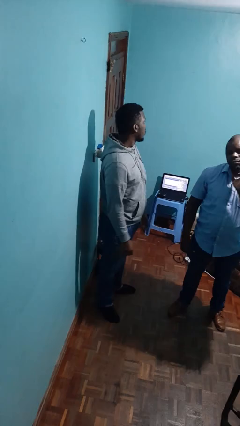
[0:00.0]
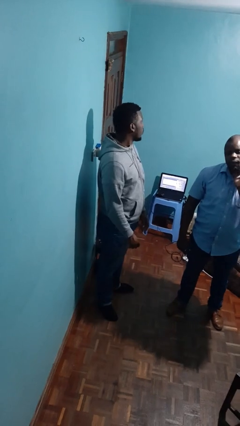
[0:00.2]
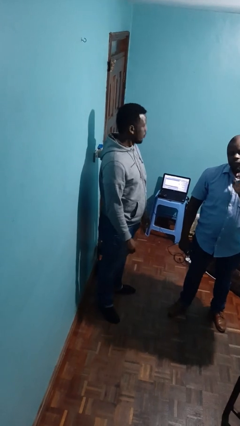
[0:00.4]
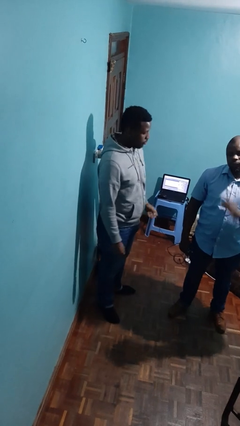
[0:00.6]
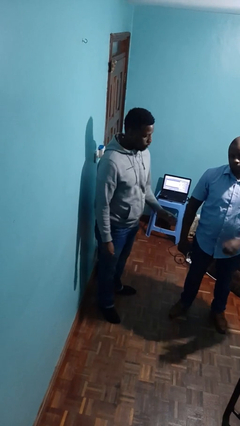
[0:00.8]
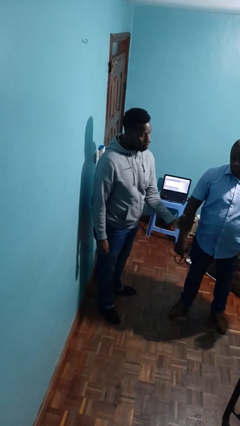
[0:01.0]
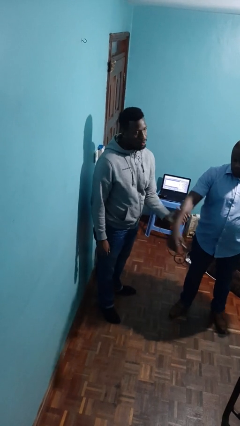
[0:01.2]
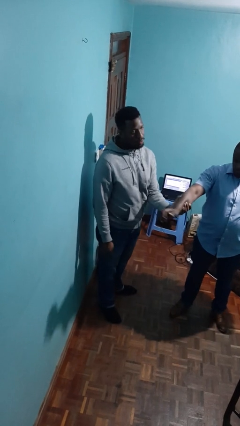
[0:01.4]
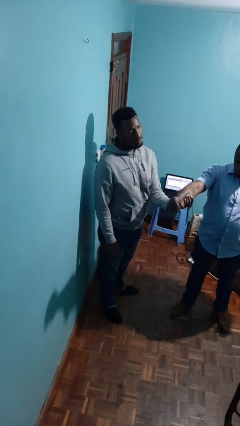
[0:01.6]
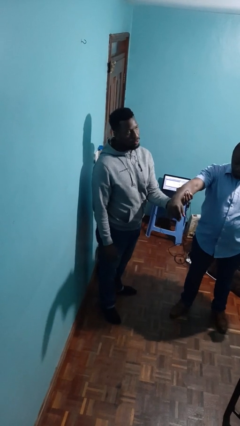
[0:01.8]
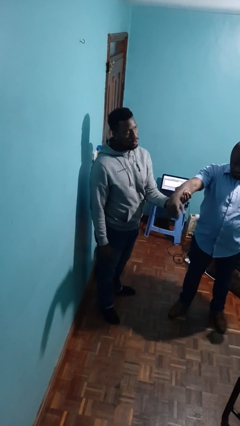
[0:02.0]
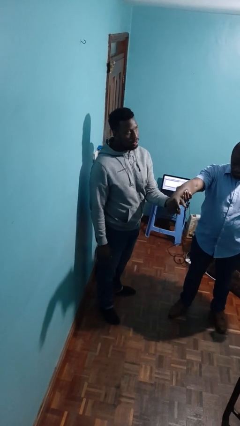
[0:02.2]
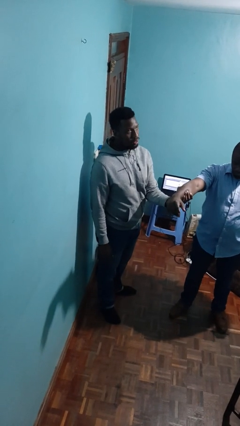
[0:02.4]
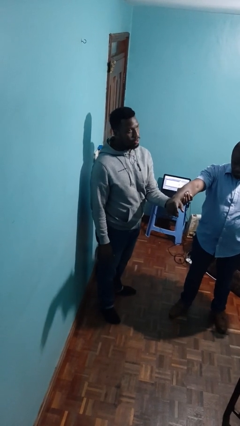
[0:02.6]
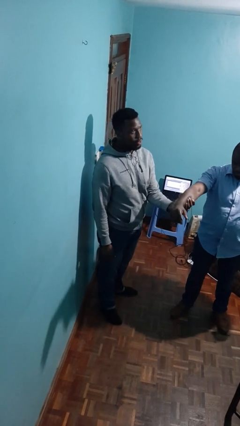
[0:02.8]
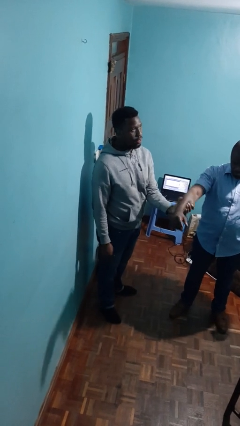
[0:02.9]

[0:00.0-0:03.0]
person grabs person by forearm

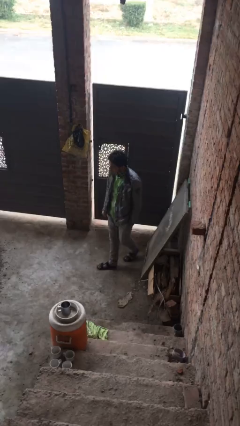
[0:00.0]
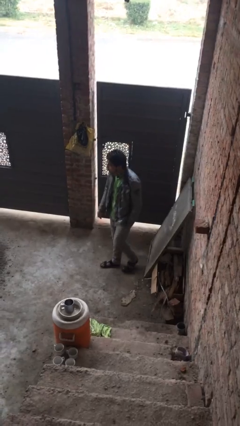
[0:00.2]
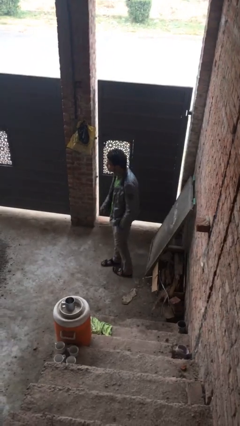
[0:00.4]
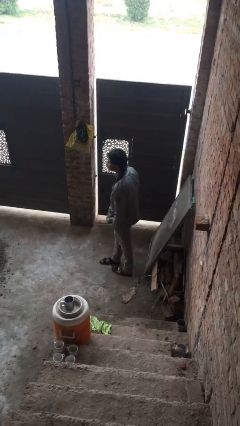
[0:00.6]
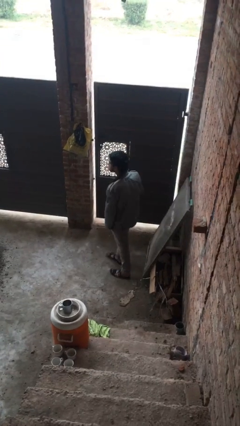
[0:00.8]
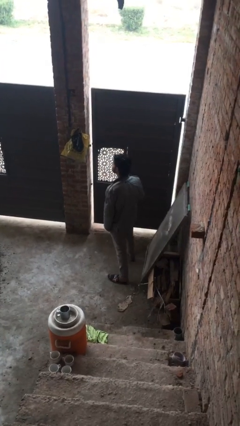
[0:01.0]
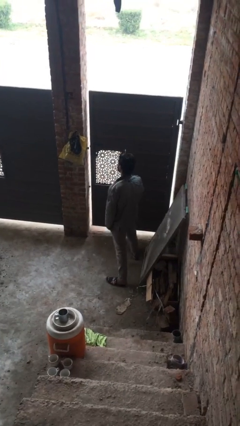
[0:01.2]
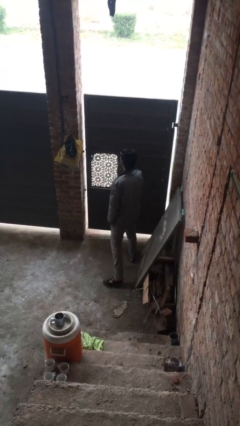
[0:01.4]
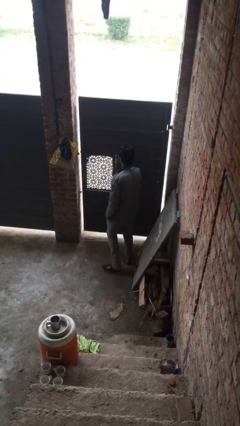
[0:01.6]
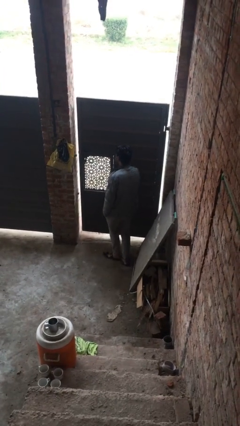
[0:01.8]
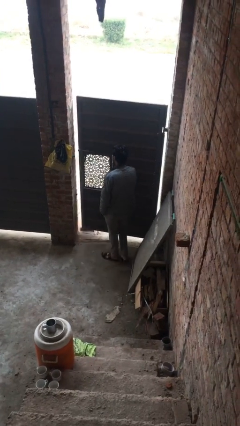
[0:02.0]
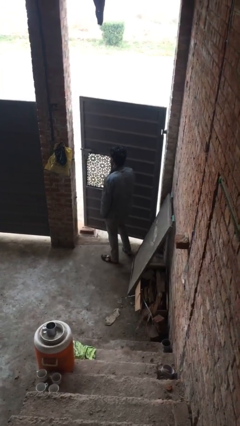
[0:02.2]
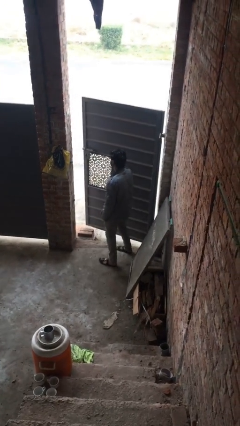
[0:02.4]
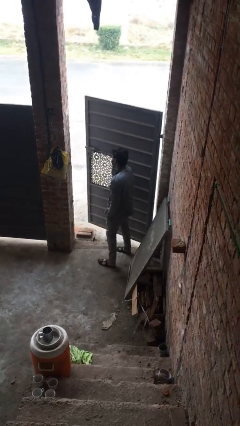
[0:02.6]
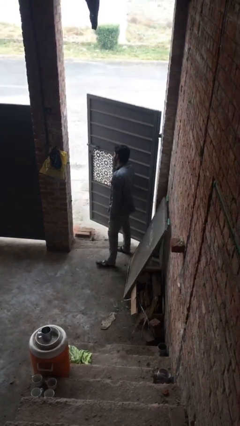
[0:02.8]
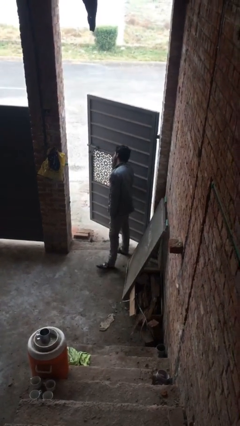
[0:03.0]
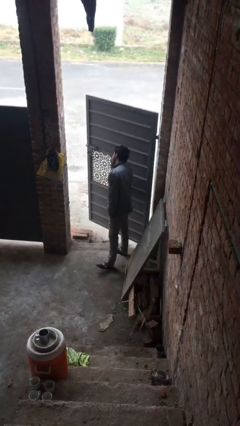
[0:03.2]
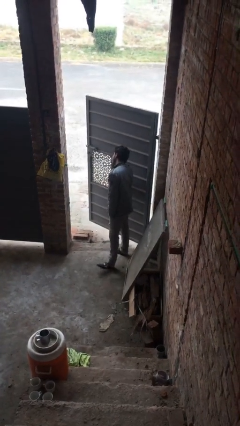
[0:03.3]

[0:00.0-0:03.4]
person opens facility door

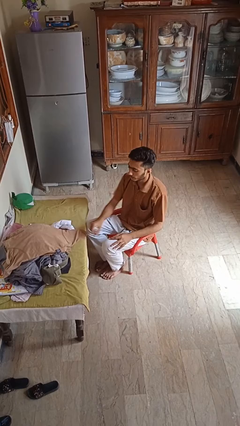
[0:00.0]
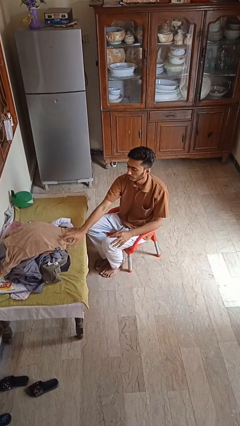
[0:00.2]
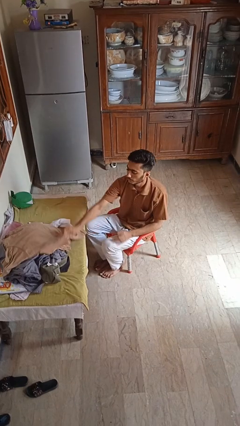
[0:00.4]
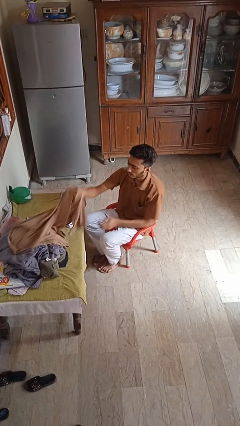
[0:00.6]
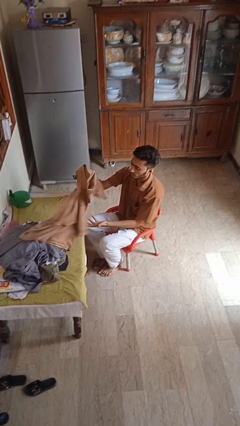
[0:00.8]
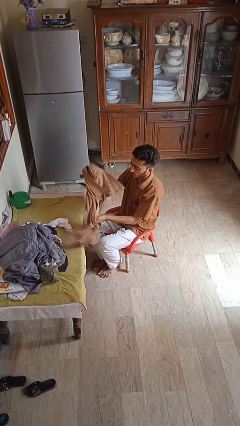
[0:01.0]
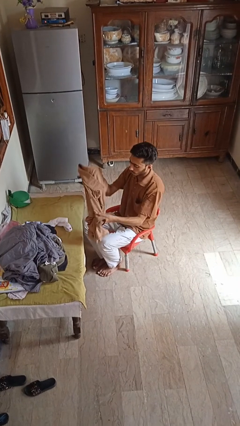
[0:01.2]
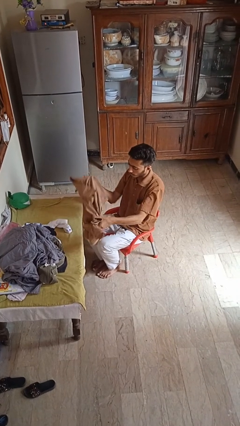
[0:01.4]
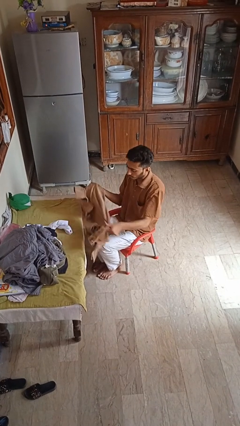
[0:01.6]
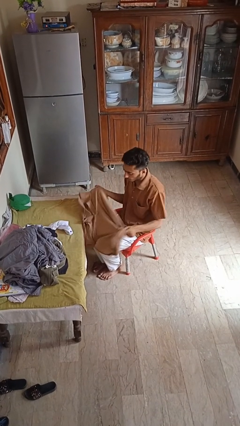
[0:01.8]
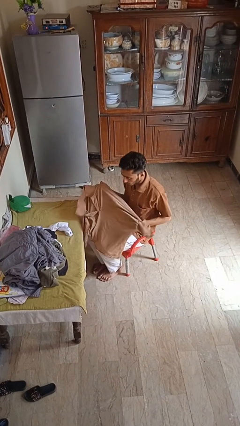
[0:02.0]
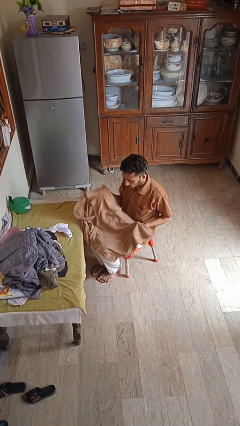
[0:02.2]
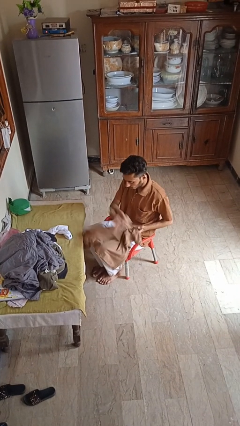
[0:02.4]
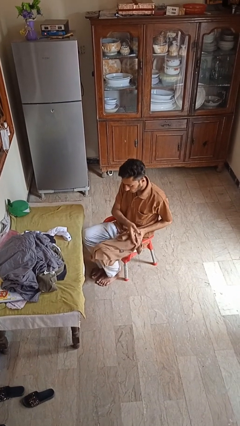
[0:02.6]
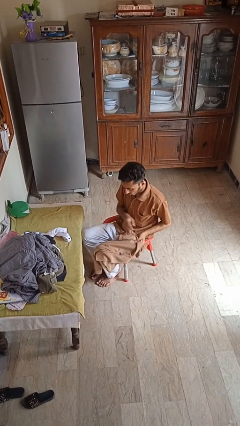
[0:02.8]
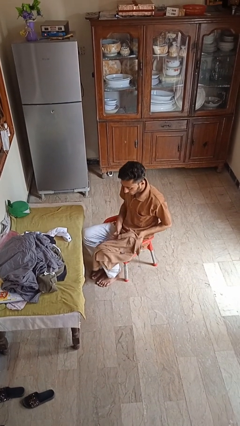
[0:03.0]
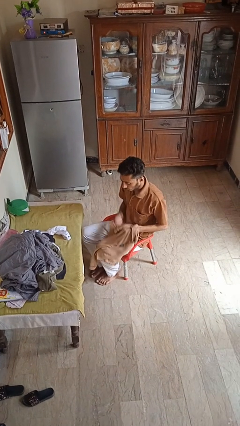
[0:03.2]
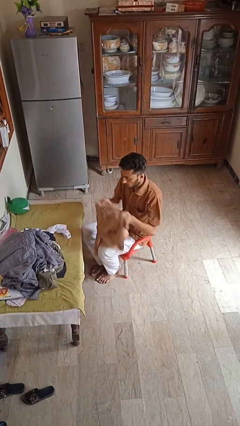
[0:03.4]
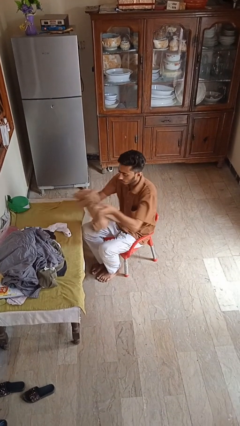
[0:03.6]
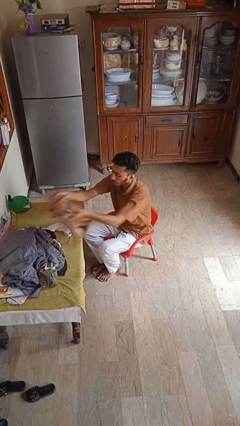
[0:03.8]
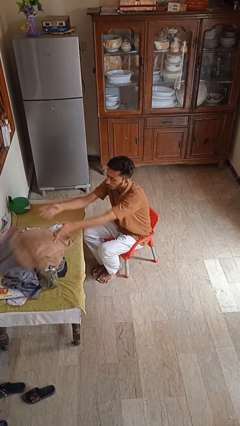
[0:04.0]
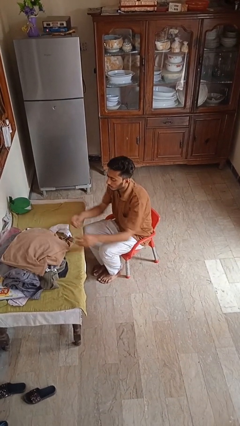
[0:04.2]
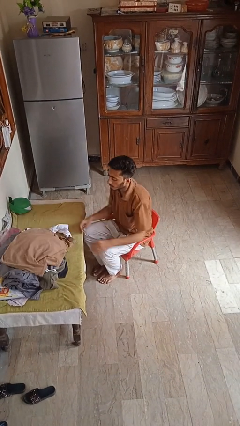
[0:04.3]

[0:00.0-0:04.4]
person folds shirt

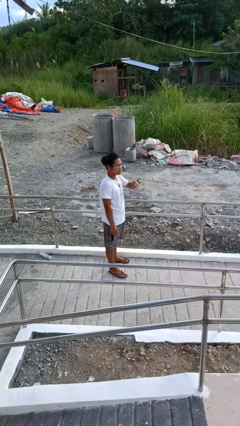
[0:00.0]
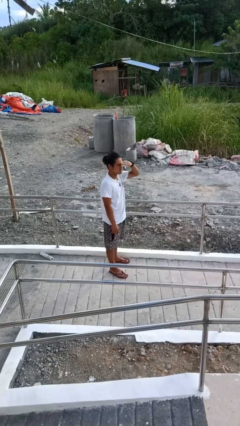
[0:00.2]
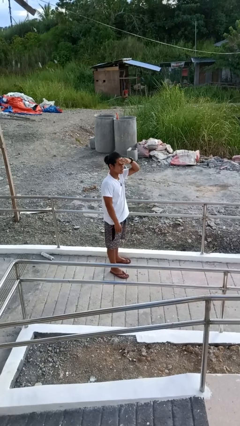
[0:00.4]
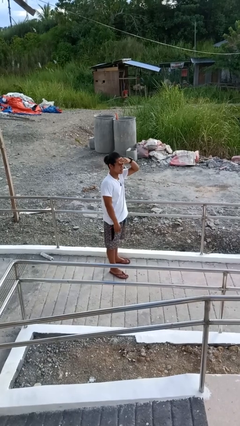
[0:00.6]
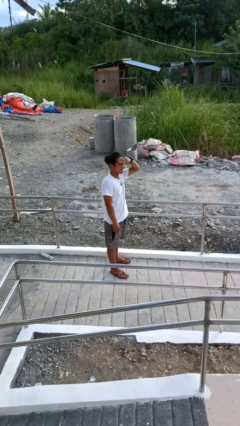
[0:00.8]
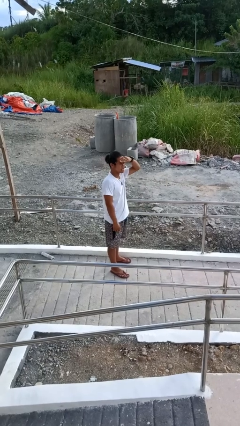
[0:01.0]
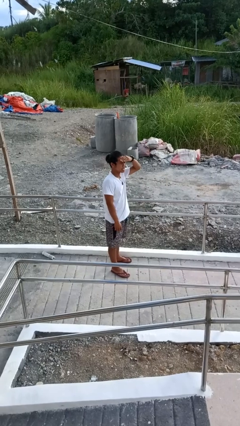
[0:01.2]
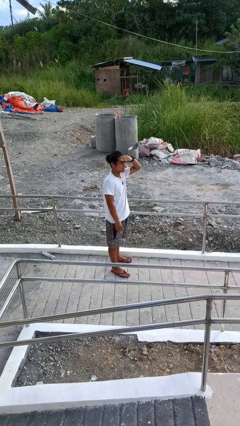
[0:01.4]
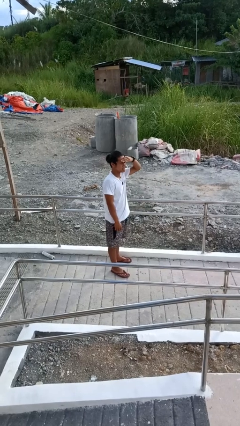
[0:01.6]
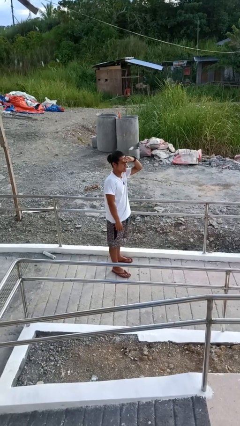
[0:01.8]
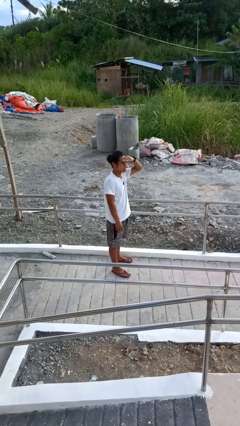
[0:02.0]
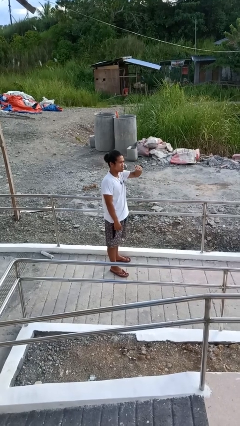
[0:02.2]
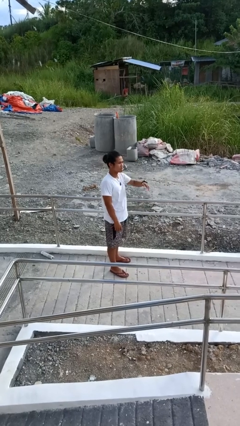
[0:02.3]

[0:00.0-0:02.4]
person shades eyes

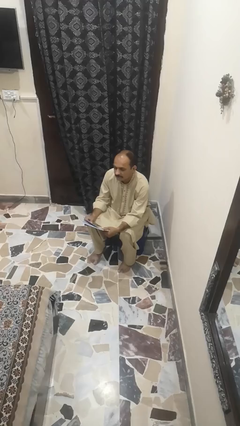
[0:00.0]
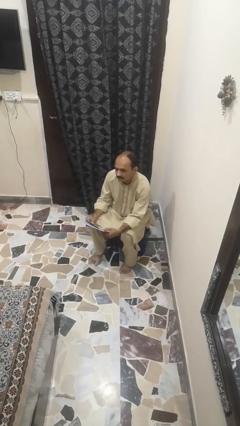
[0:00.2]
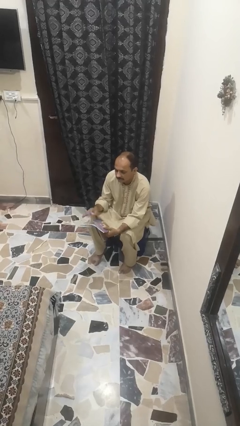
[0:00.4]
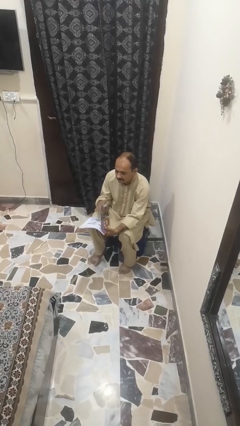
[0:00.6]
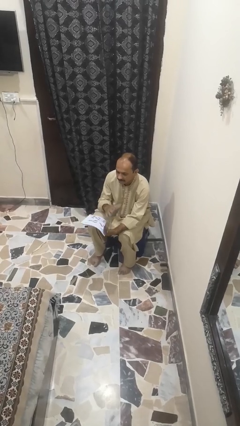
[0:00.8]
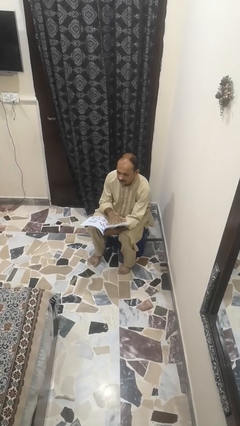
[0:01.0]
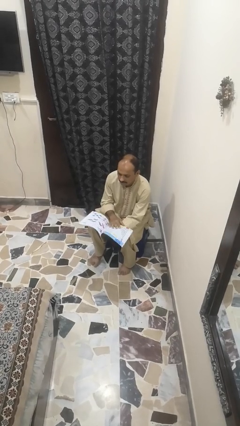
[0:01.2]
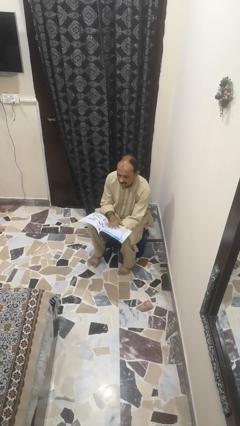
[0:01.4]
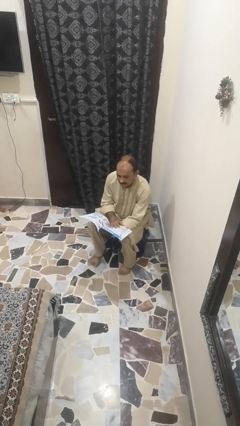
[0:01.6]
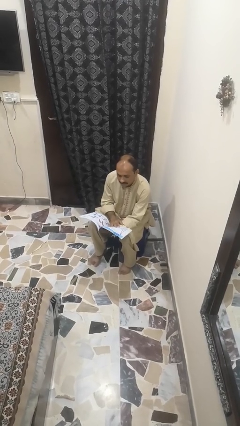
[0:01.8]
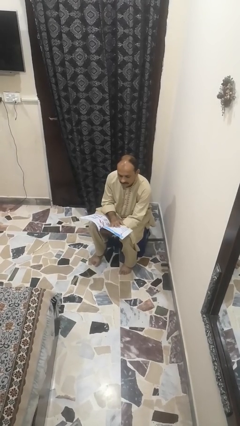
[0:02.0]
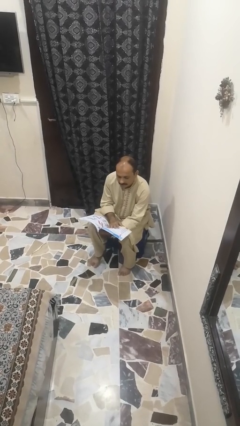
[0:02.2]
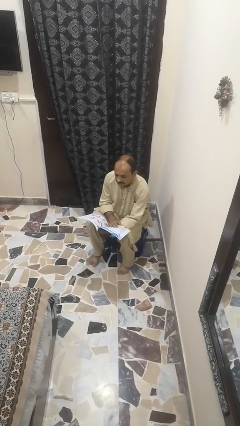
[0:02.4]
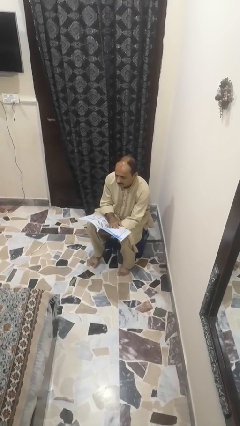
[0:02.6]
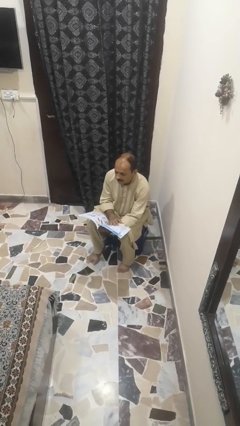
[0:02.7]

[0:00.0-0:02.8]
person reads magazine

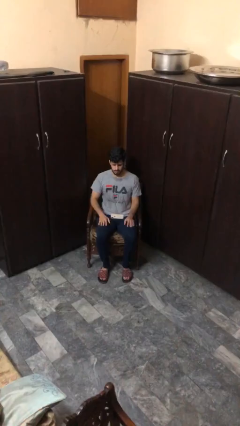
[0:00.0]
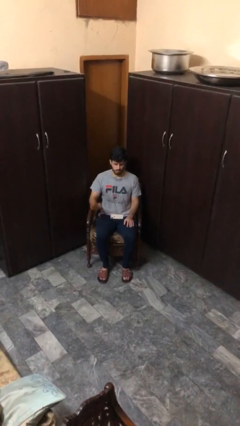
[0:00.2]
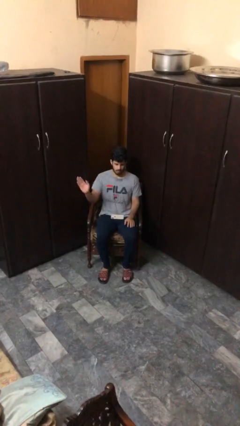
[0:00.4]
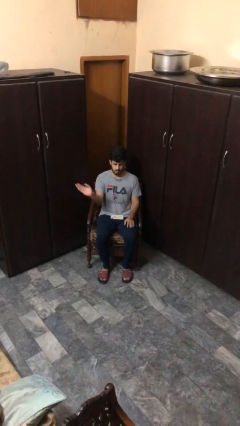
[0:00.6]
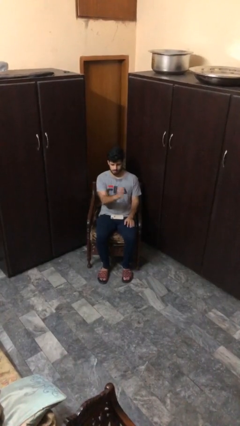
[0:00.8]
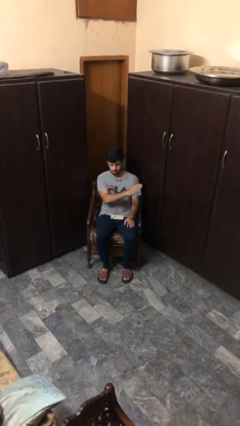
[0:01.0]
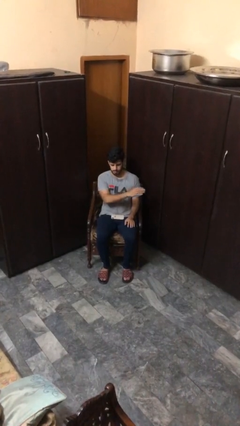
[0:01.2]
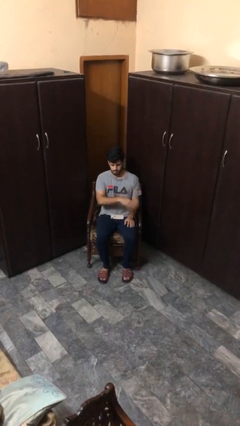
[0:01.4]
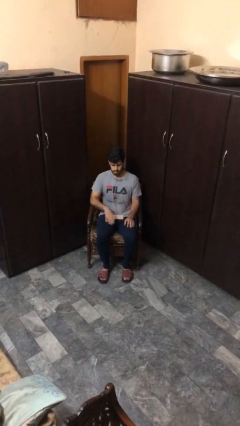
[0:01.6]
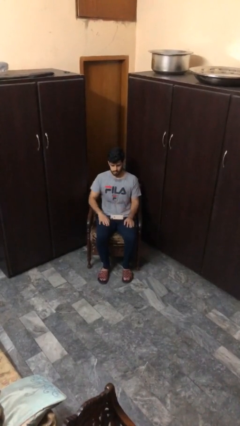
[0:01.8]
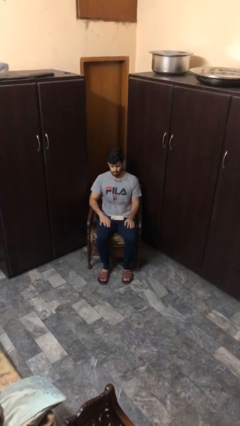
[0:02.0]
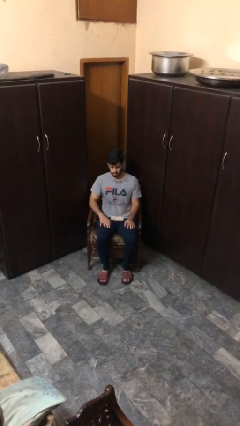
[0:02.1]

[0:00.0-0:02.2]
person gestures swipe left
